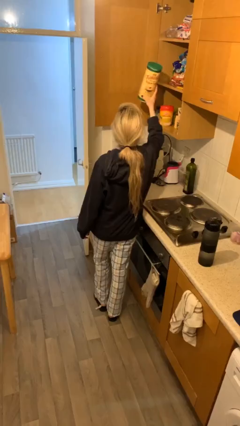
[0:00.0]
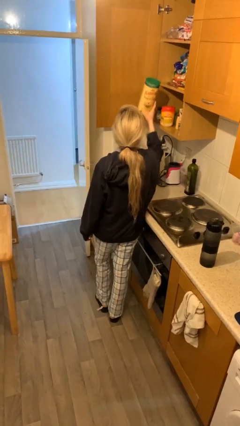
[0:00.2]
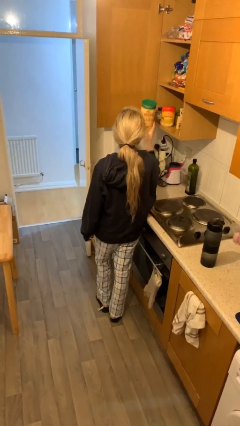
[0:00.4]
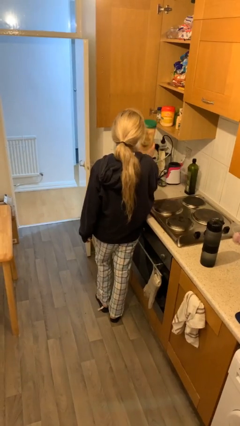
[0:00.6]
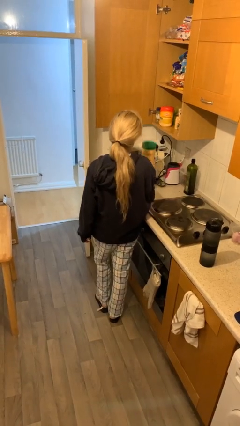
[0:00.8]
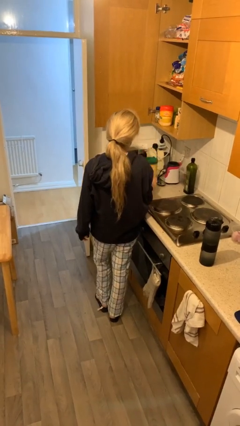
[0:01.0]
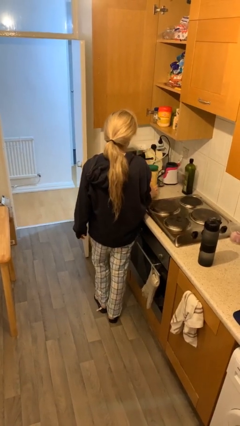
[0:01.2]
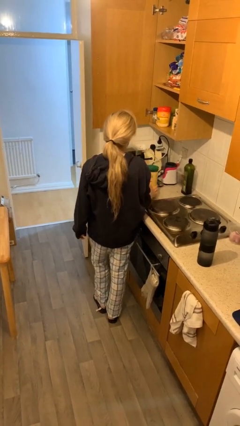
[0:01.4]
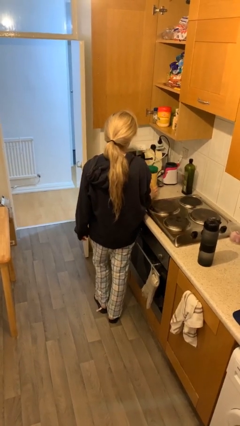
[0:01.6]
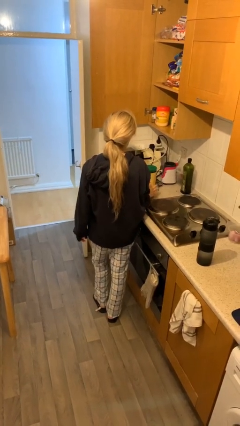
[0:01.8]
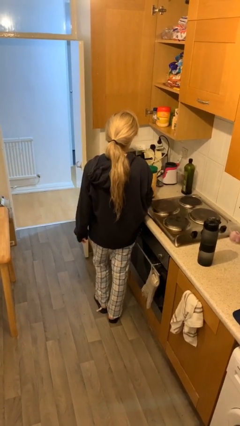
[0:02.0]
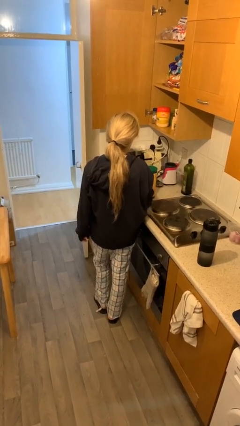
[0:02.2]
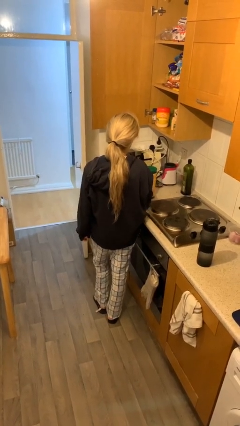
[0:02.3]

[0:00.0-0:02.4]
person puts down object on table

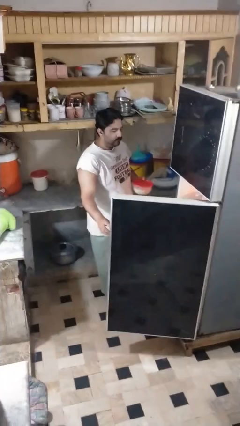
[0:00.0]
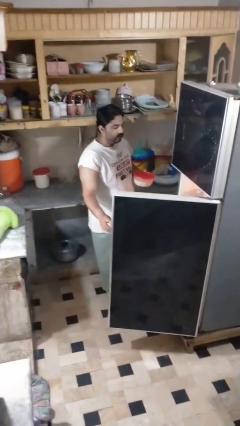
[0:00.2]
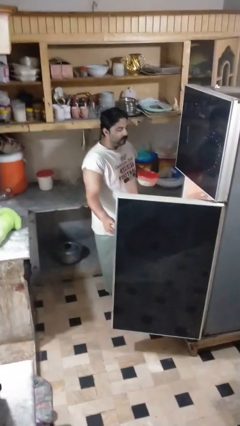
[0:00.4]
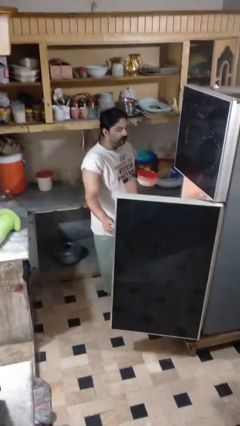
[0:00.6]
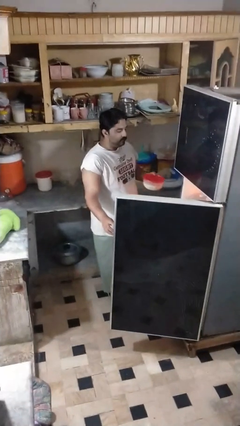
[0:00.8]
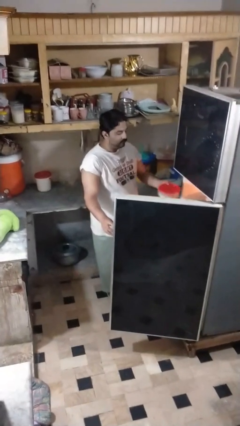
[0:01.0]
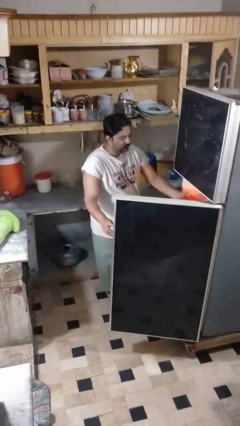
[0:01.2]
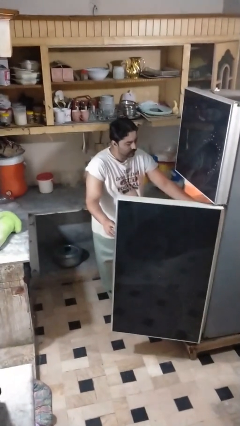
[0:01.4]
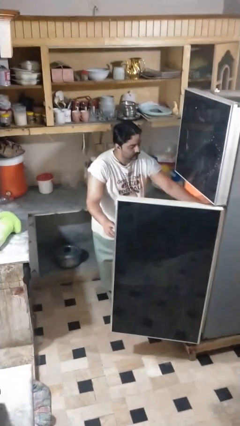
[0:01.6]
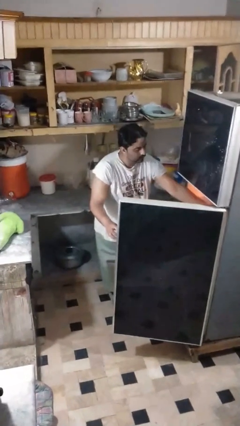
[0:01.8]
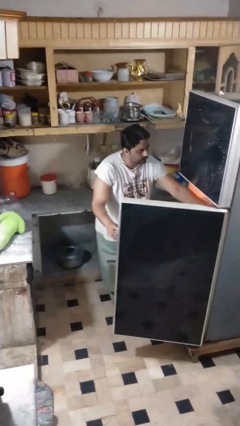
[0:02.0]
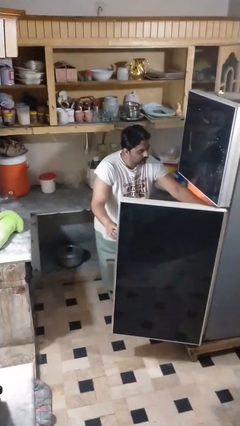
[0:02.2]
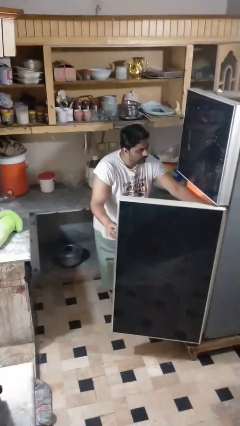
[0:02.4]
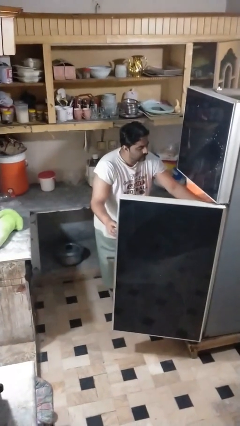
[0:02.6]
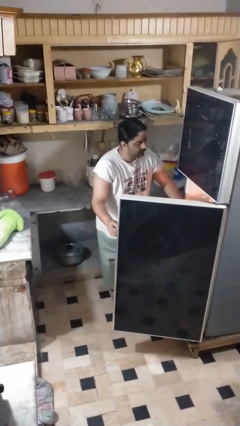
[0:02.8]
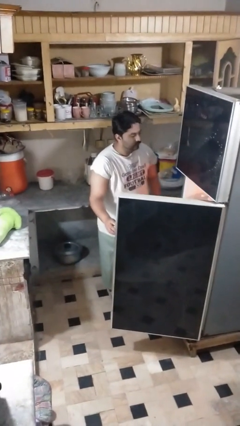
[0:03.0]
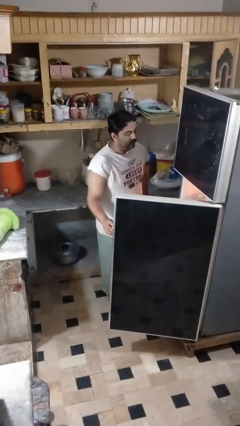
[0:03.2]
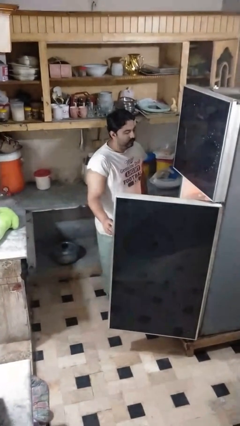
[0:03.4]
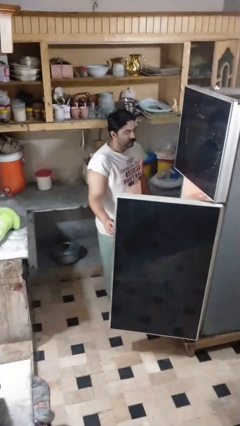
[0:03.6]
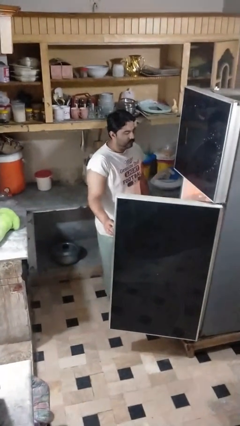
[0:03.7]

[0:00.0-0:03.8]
person puts object into refrigerator

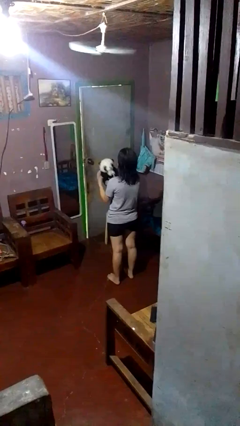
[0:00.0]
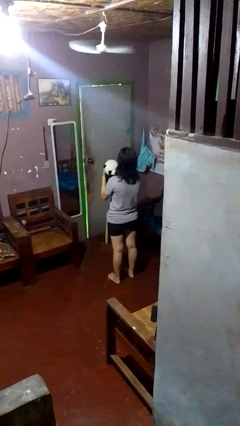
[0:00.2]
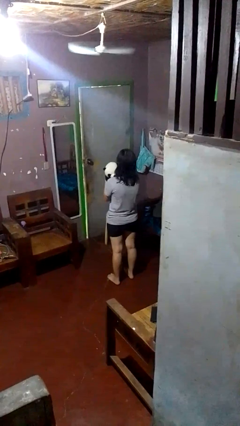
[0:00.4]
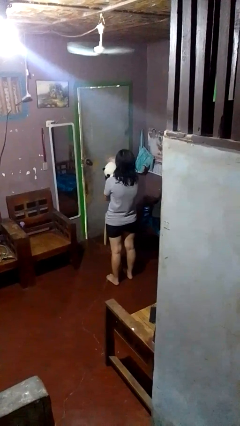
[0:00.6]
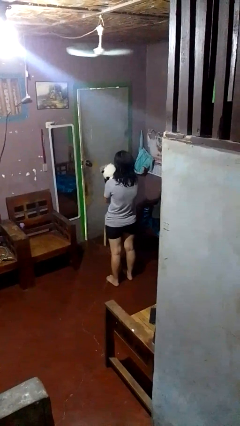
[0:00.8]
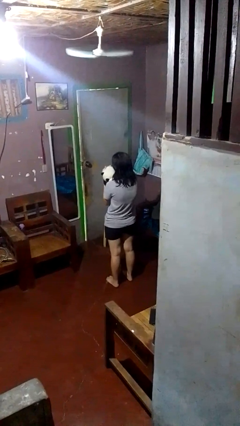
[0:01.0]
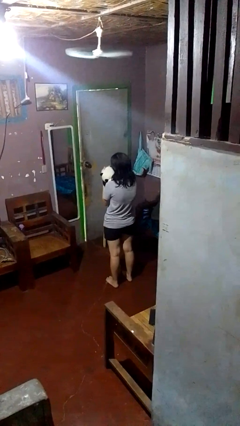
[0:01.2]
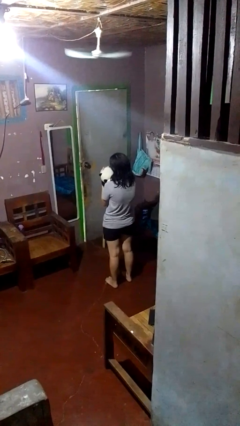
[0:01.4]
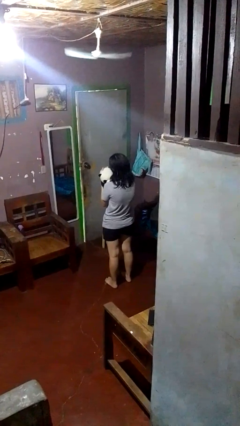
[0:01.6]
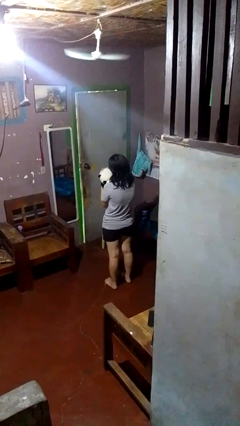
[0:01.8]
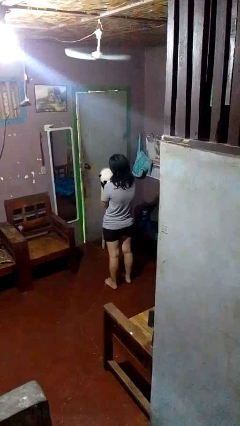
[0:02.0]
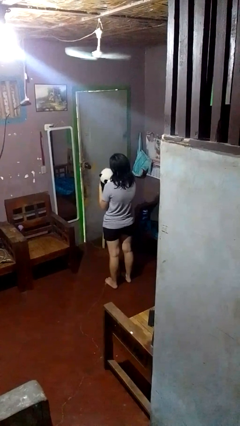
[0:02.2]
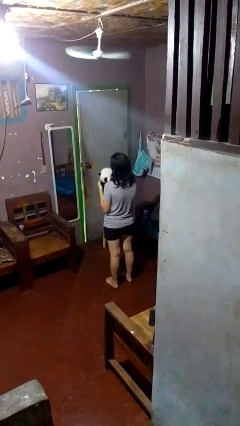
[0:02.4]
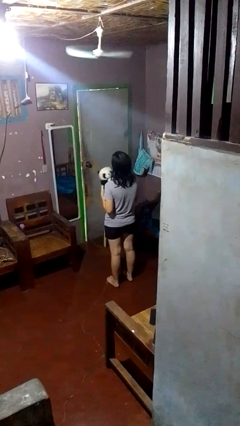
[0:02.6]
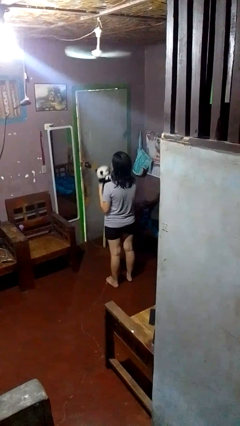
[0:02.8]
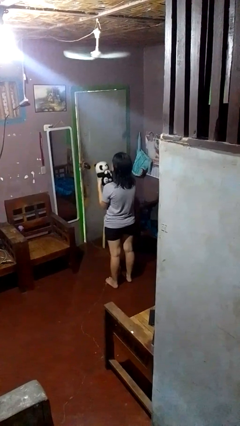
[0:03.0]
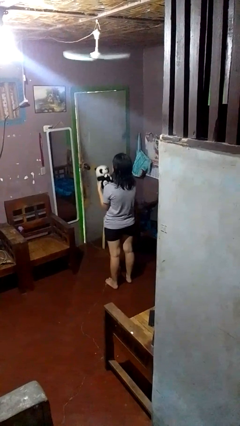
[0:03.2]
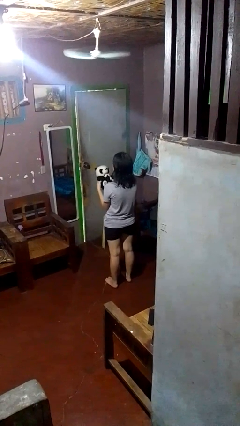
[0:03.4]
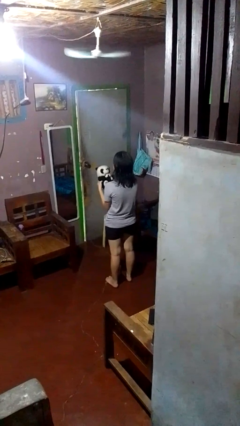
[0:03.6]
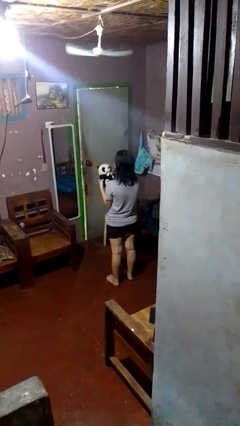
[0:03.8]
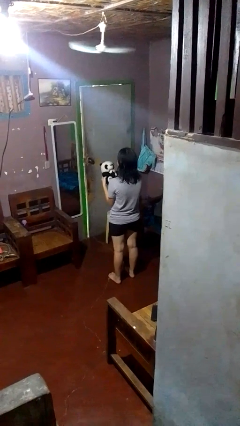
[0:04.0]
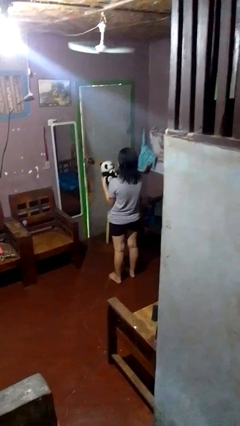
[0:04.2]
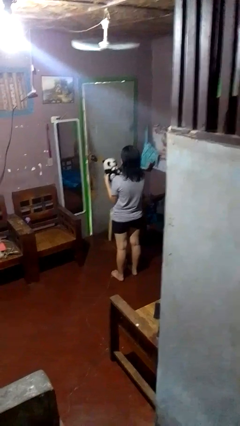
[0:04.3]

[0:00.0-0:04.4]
person hugs stuffed animal

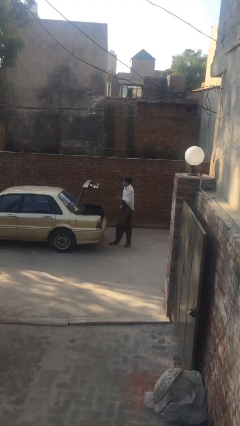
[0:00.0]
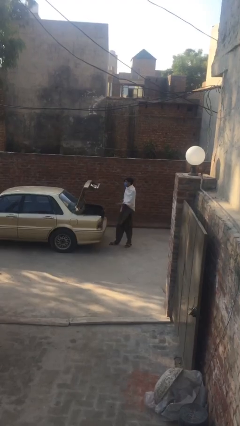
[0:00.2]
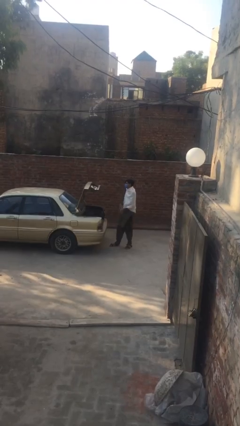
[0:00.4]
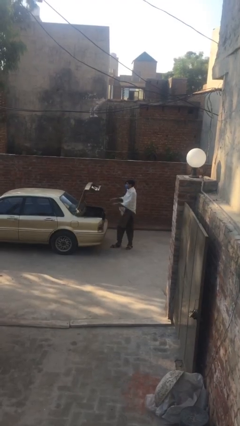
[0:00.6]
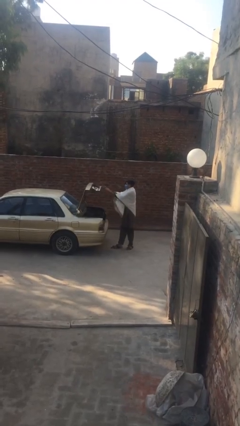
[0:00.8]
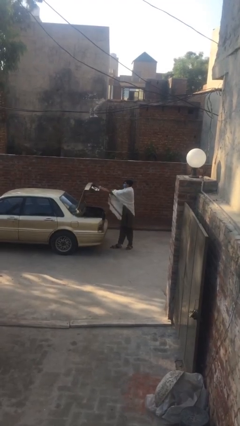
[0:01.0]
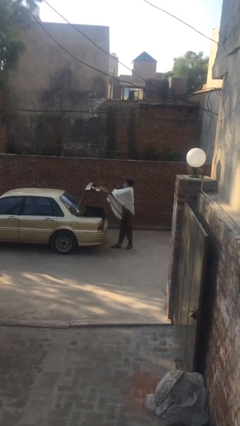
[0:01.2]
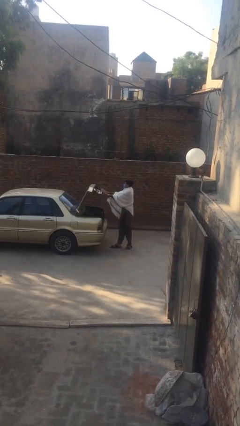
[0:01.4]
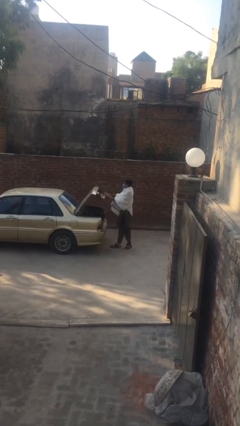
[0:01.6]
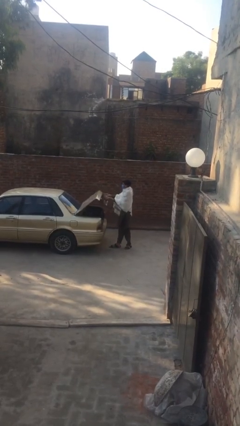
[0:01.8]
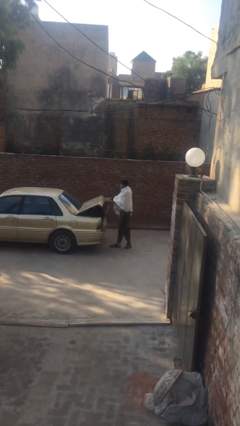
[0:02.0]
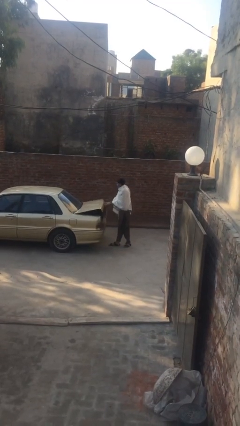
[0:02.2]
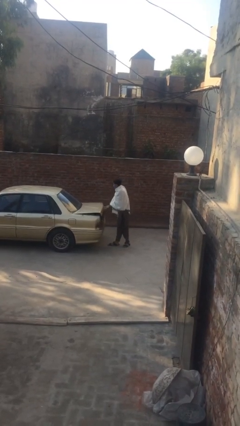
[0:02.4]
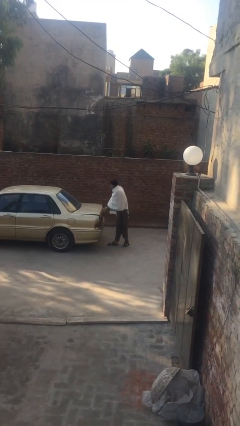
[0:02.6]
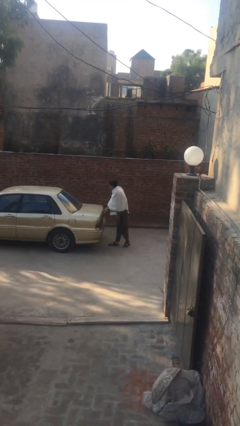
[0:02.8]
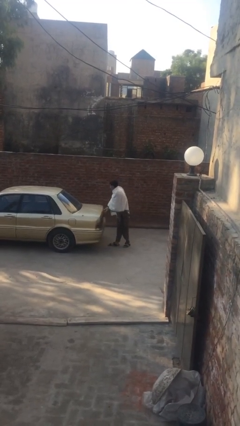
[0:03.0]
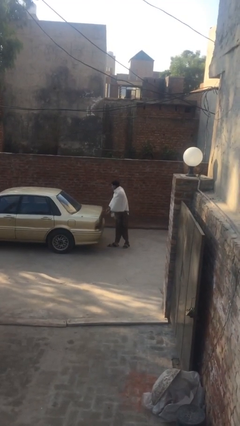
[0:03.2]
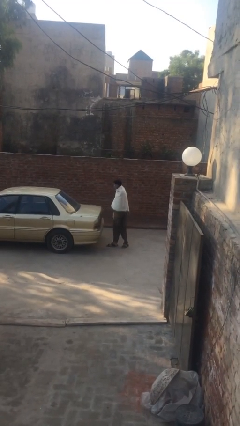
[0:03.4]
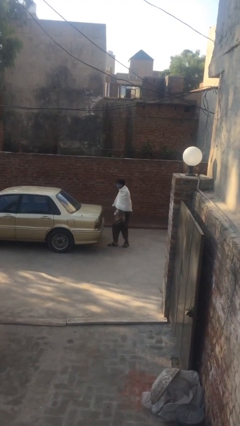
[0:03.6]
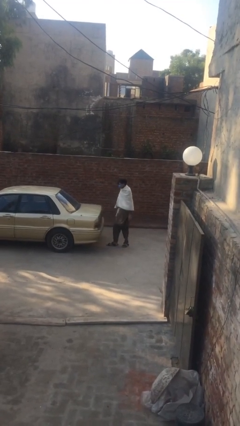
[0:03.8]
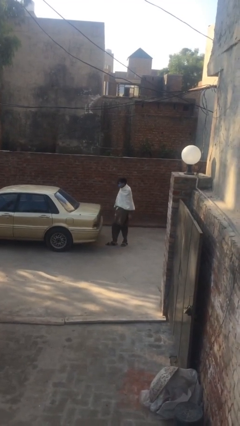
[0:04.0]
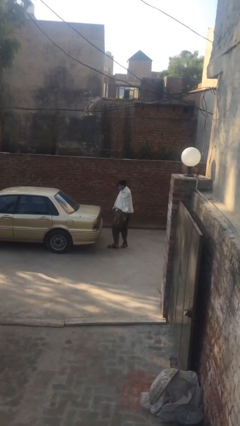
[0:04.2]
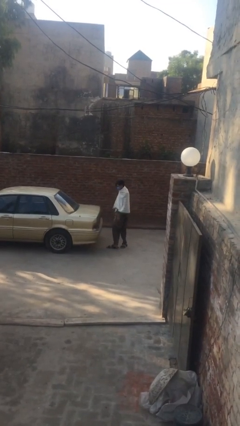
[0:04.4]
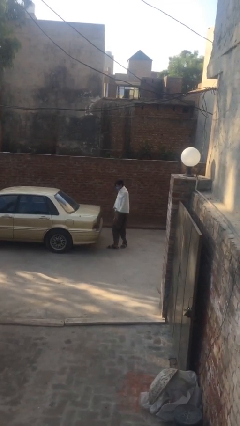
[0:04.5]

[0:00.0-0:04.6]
person closes car trunk

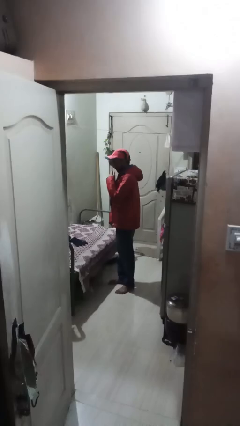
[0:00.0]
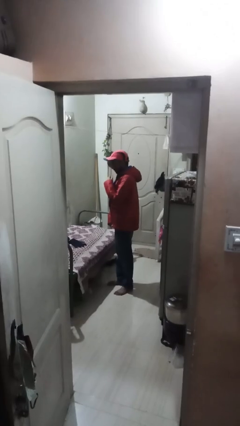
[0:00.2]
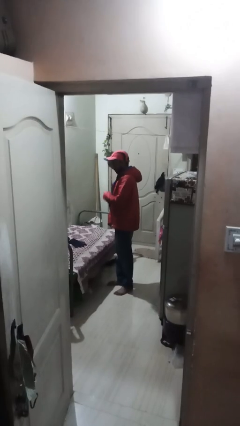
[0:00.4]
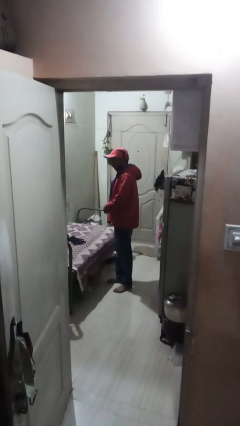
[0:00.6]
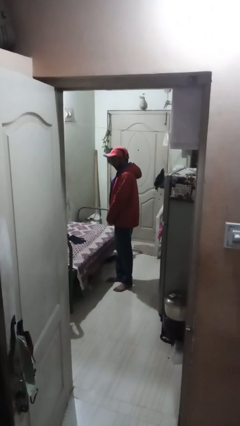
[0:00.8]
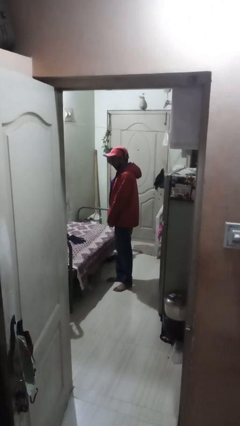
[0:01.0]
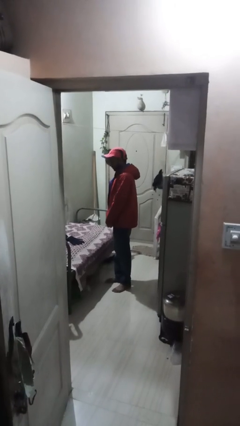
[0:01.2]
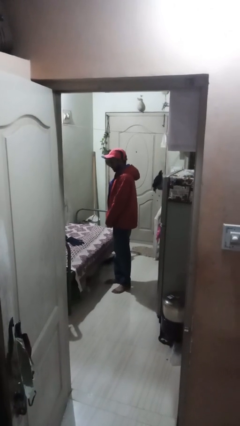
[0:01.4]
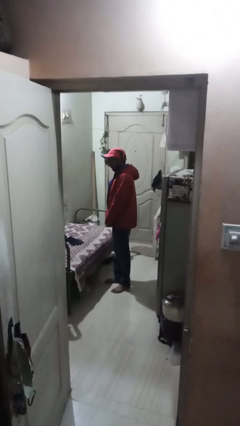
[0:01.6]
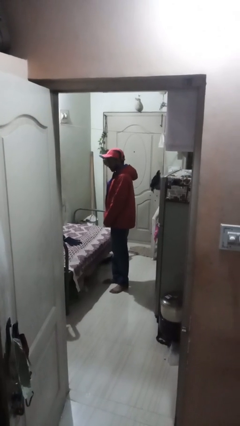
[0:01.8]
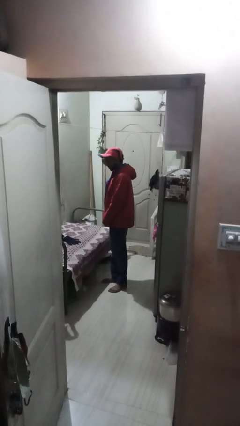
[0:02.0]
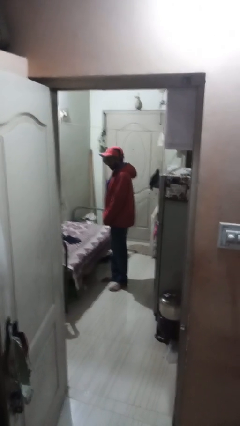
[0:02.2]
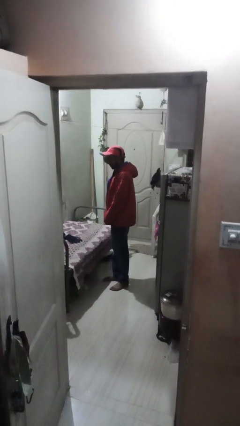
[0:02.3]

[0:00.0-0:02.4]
person unzips jacket
